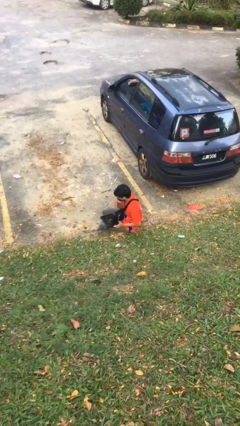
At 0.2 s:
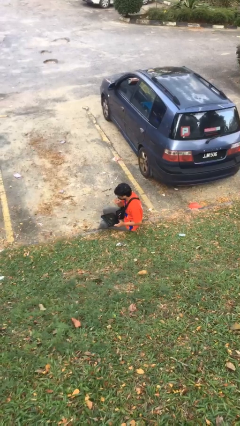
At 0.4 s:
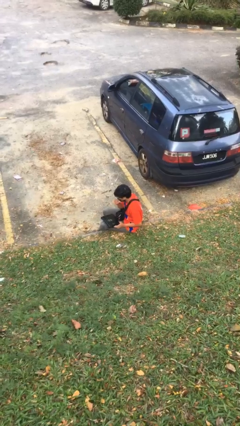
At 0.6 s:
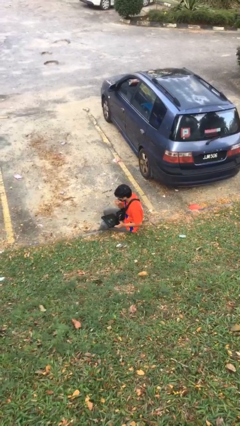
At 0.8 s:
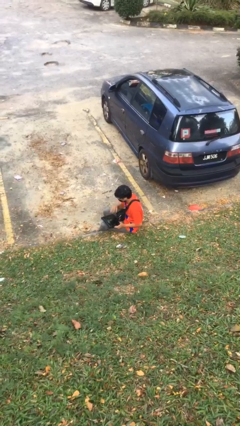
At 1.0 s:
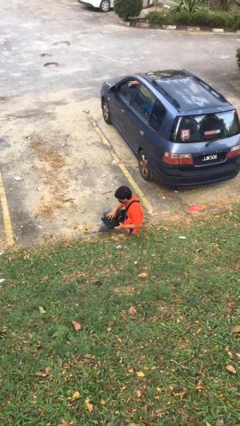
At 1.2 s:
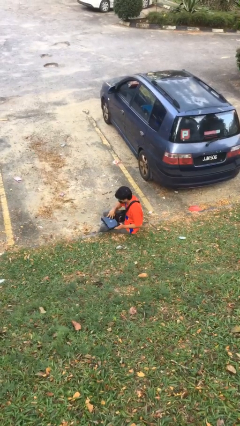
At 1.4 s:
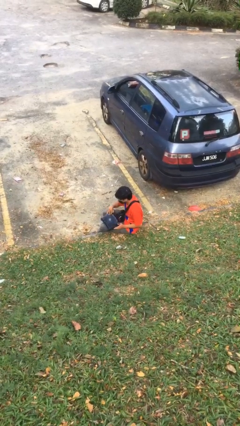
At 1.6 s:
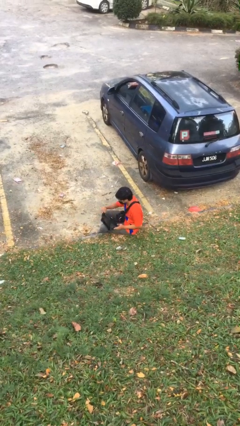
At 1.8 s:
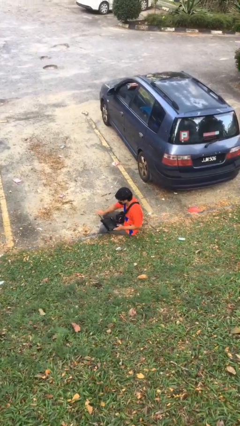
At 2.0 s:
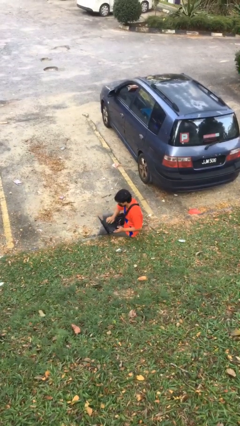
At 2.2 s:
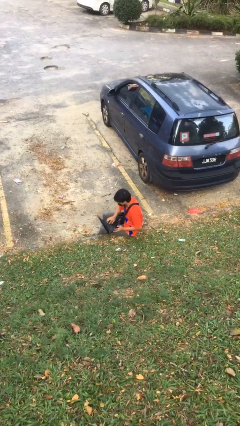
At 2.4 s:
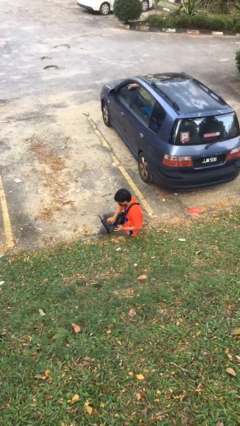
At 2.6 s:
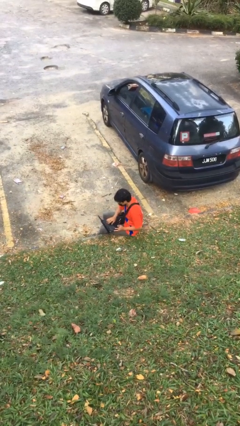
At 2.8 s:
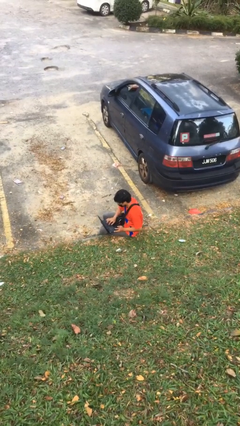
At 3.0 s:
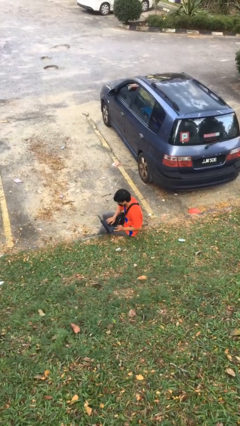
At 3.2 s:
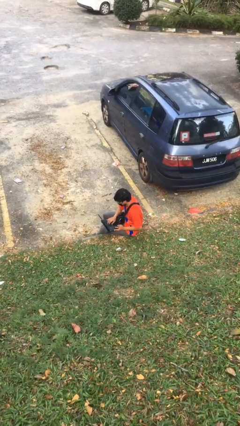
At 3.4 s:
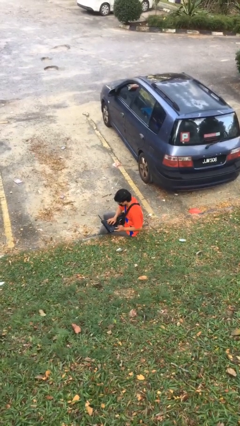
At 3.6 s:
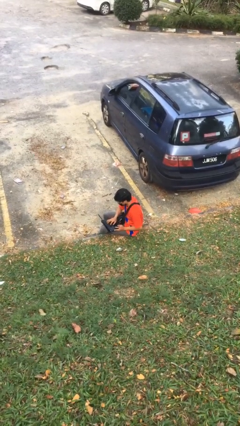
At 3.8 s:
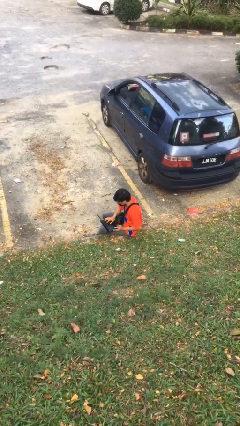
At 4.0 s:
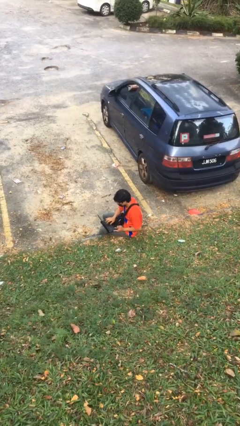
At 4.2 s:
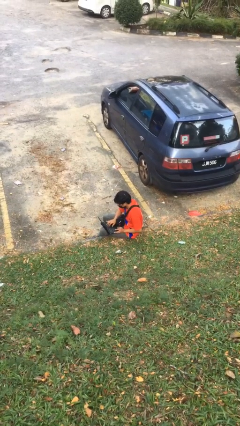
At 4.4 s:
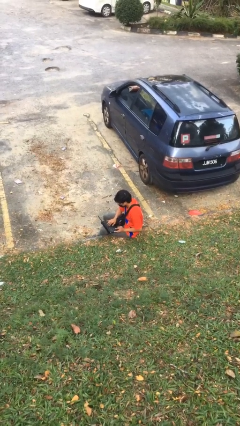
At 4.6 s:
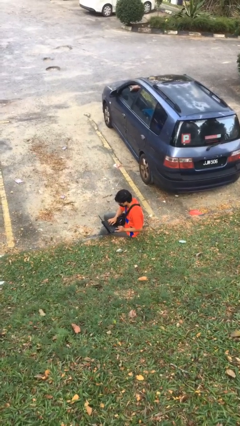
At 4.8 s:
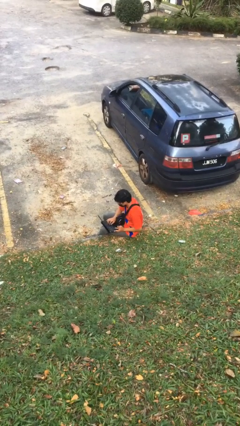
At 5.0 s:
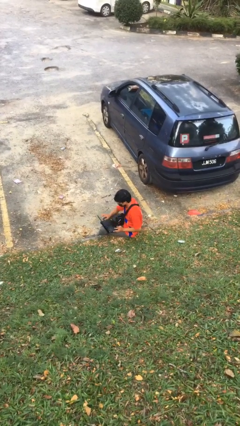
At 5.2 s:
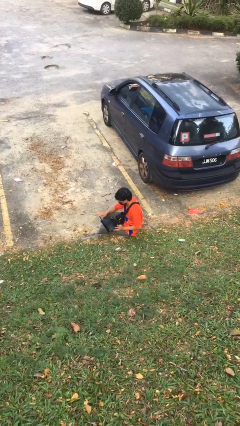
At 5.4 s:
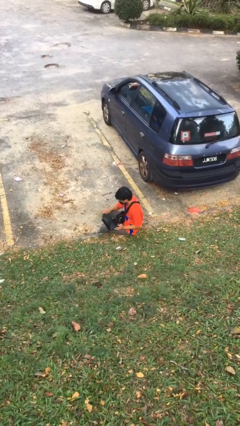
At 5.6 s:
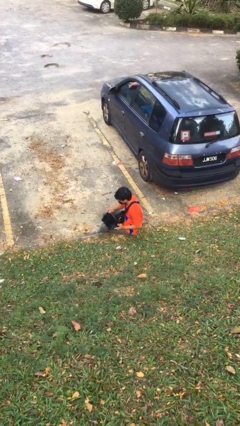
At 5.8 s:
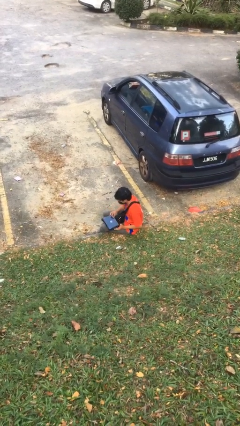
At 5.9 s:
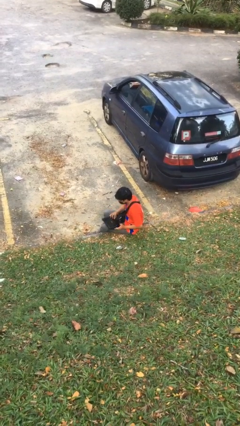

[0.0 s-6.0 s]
person interacts with laptop

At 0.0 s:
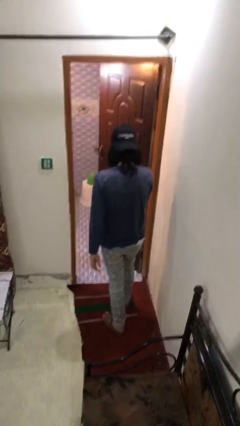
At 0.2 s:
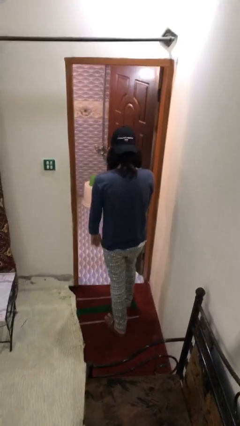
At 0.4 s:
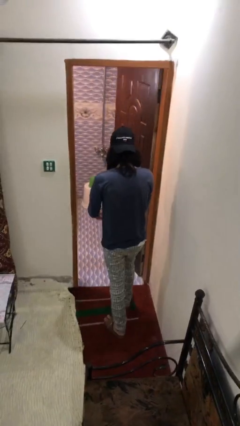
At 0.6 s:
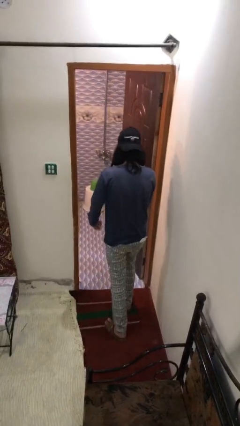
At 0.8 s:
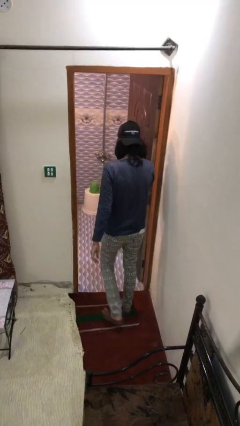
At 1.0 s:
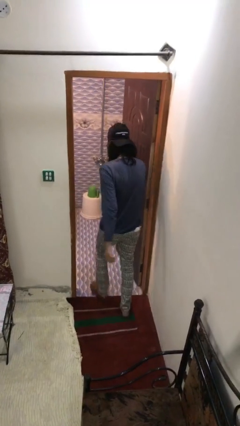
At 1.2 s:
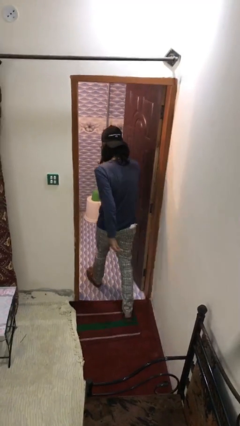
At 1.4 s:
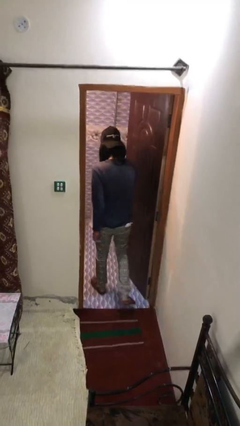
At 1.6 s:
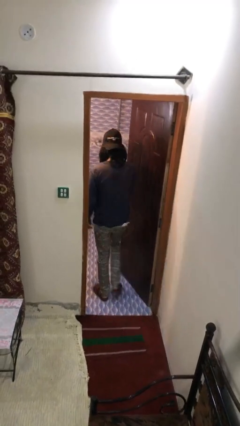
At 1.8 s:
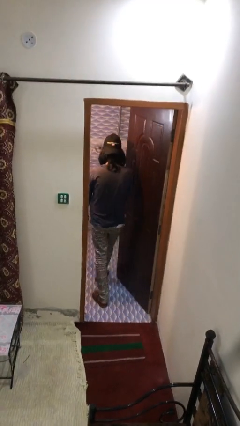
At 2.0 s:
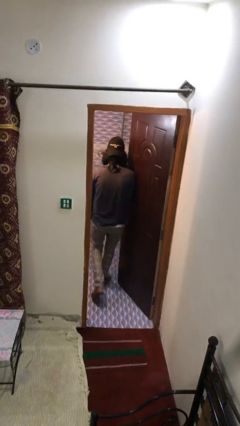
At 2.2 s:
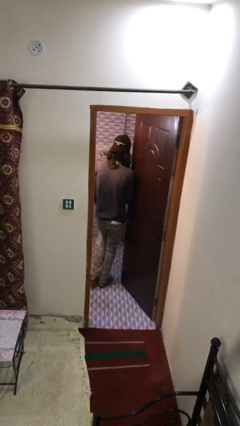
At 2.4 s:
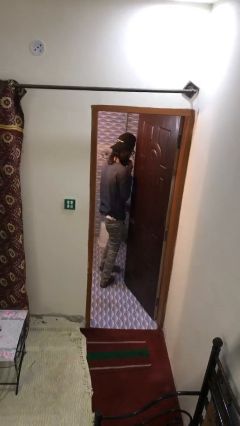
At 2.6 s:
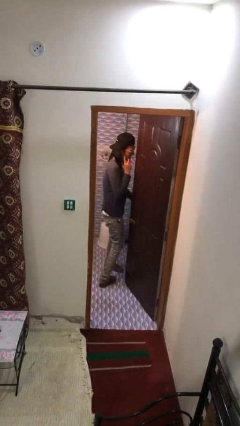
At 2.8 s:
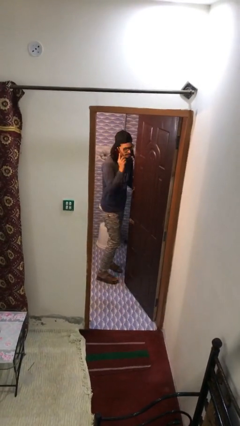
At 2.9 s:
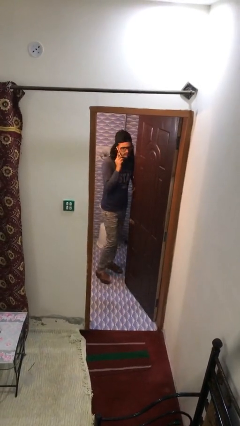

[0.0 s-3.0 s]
person exits scene through structure

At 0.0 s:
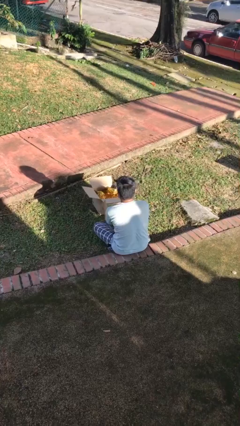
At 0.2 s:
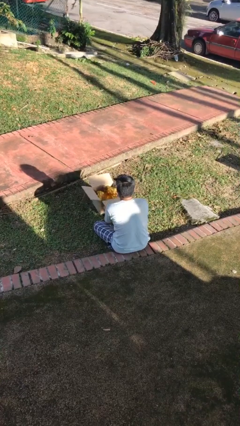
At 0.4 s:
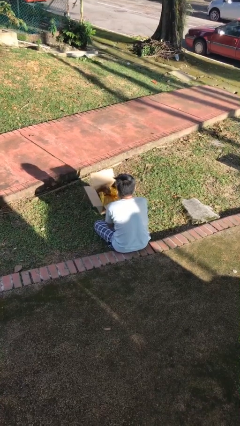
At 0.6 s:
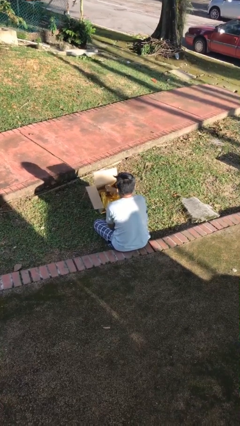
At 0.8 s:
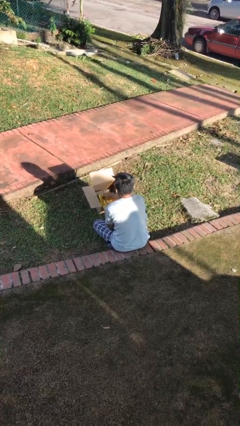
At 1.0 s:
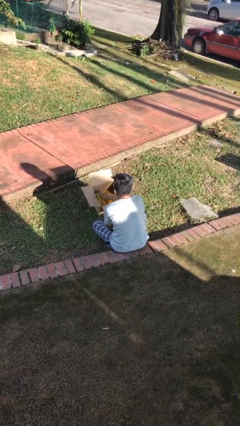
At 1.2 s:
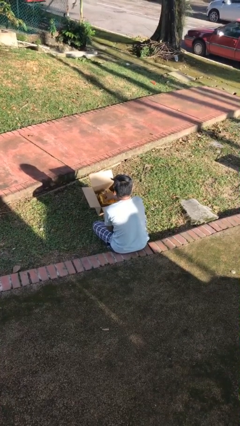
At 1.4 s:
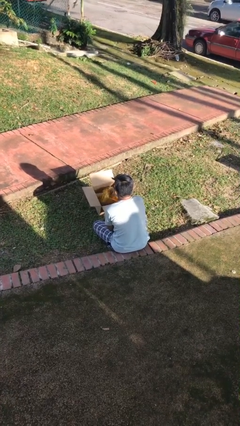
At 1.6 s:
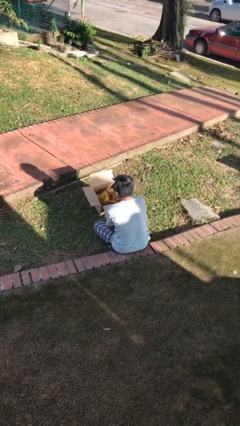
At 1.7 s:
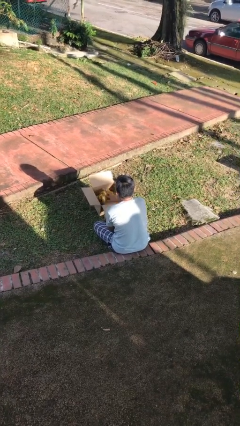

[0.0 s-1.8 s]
person searches in box

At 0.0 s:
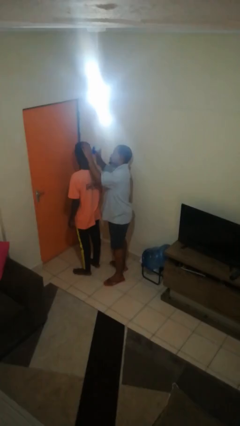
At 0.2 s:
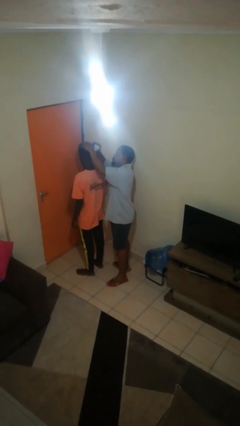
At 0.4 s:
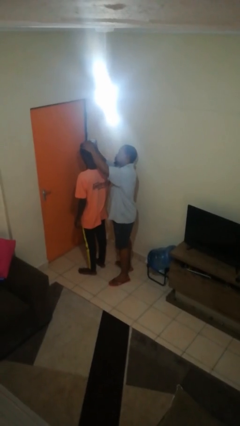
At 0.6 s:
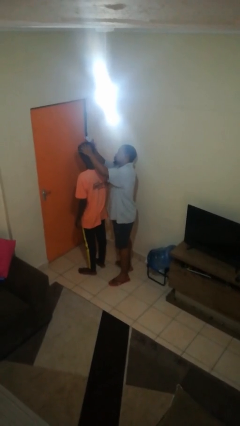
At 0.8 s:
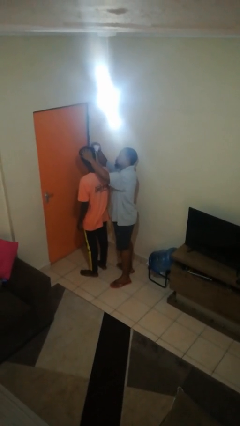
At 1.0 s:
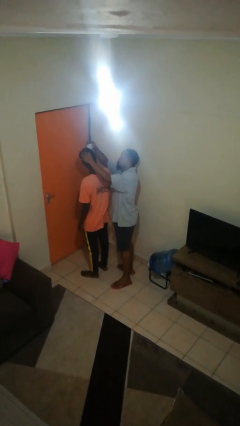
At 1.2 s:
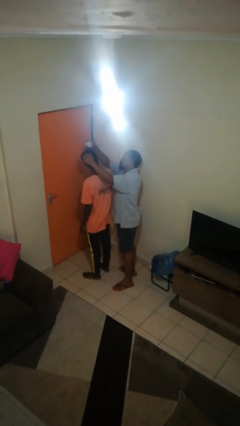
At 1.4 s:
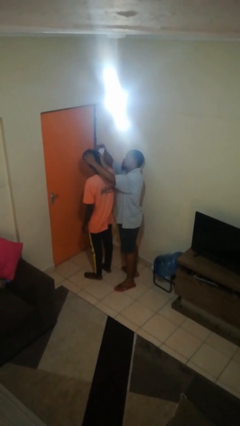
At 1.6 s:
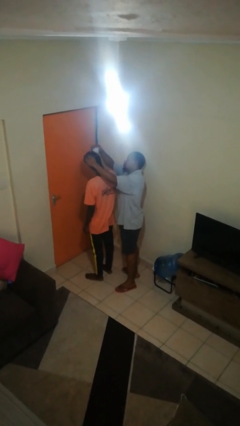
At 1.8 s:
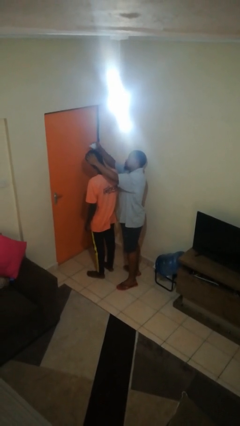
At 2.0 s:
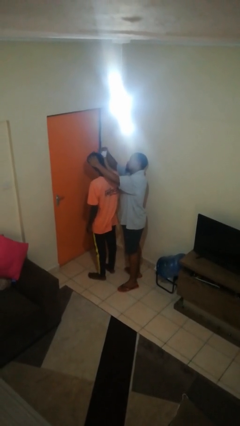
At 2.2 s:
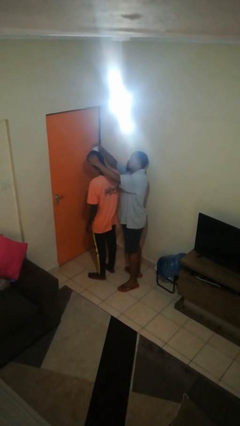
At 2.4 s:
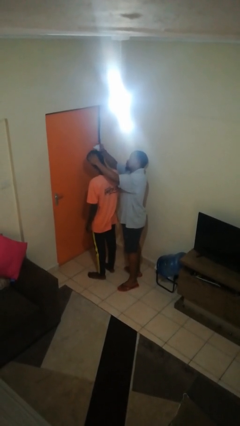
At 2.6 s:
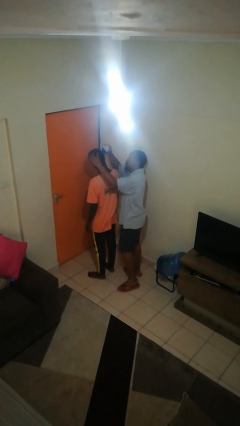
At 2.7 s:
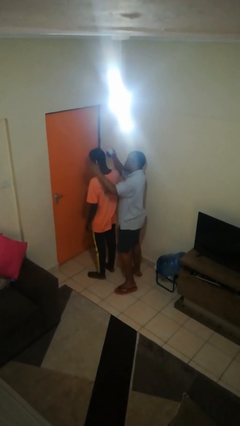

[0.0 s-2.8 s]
person brushes hair of person

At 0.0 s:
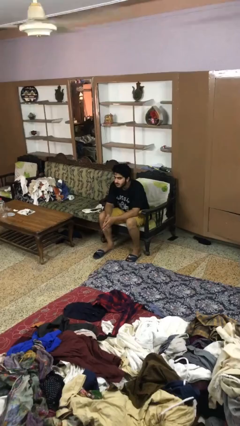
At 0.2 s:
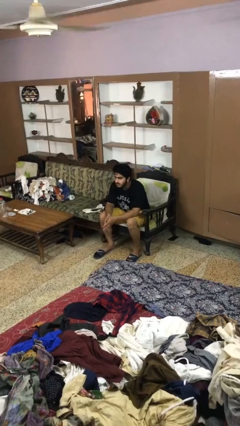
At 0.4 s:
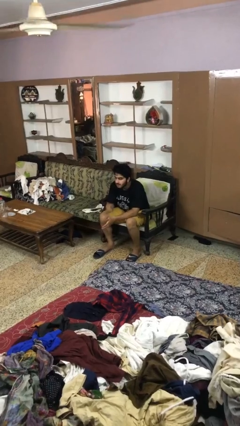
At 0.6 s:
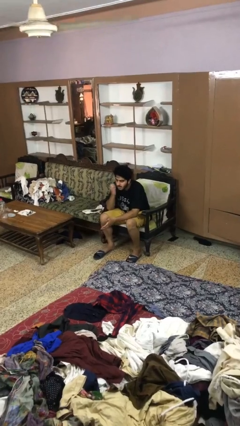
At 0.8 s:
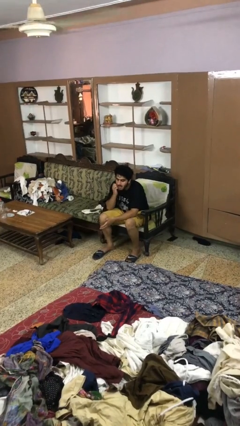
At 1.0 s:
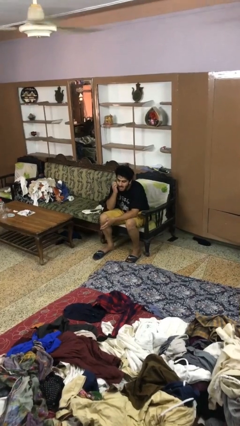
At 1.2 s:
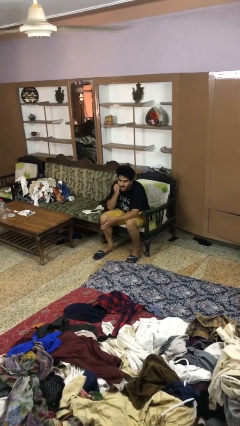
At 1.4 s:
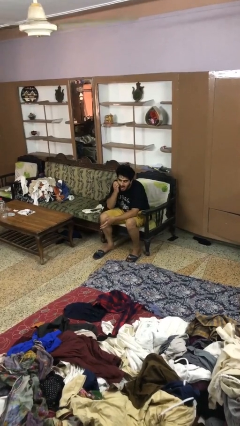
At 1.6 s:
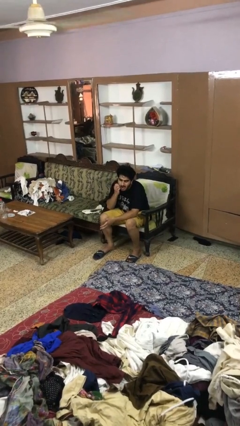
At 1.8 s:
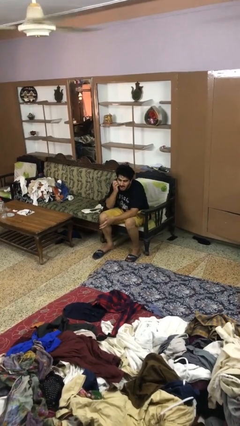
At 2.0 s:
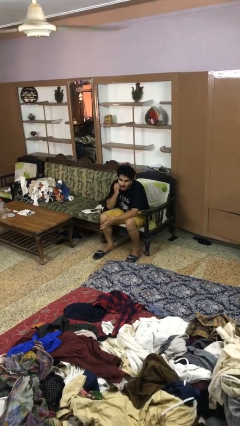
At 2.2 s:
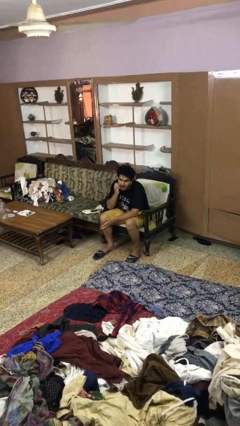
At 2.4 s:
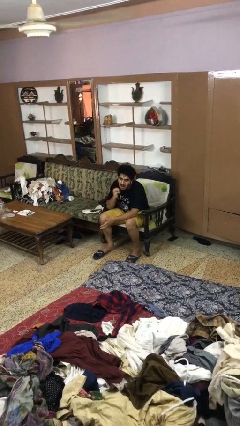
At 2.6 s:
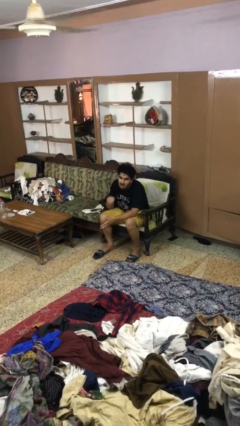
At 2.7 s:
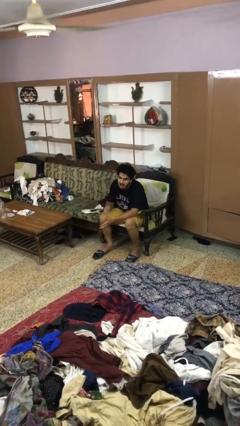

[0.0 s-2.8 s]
person scratches face

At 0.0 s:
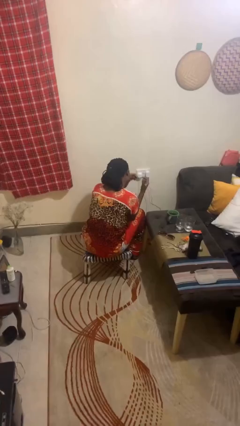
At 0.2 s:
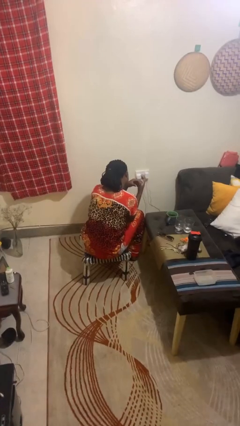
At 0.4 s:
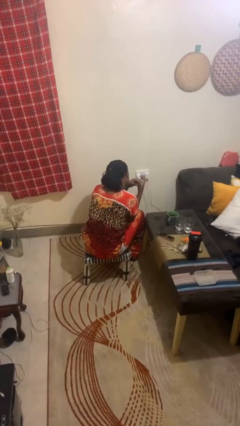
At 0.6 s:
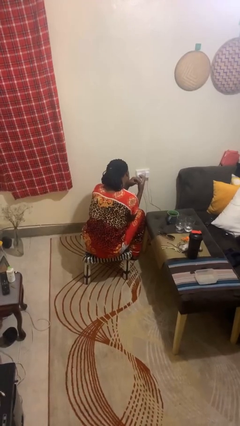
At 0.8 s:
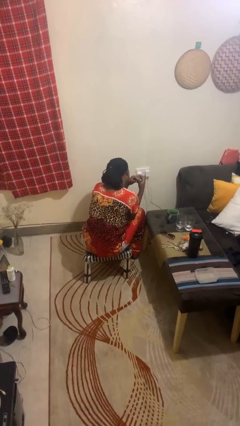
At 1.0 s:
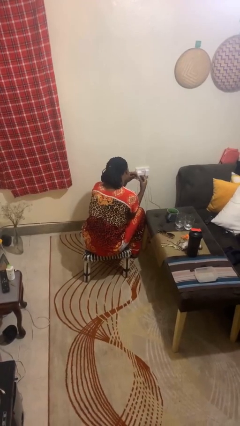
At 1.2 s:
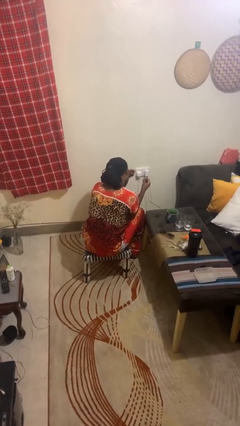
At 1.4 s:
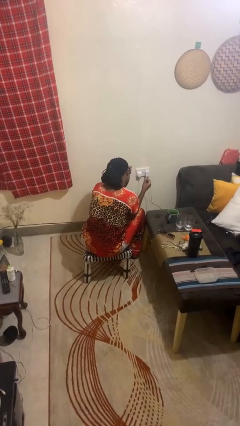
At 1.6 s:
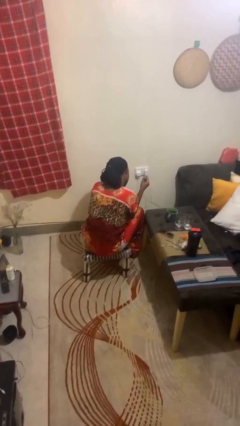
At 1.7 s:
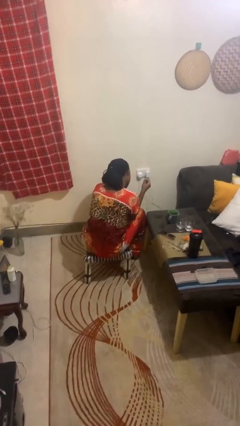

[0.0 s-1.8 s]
person takes off ring
